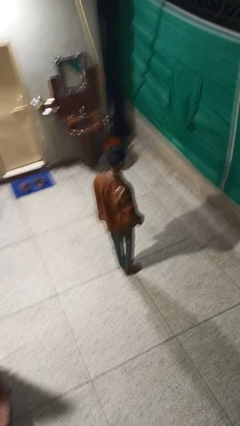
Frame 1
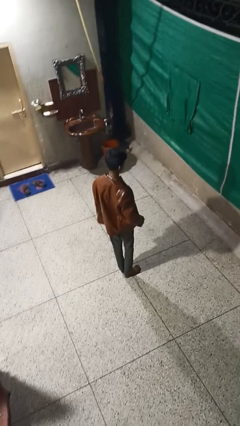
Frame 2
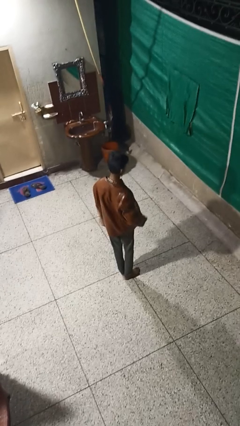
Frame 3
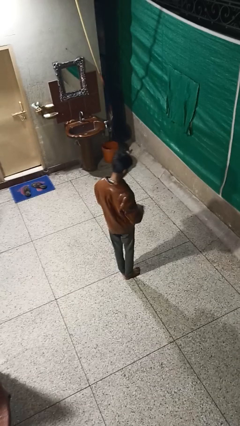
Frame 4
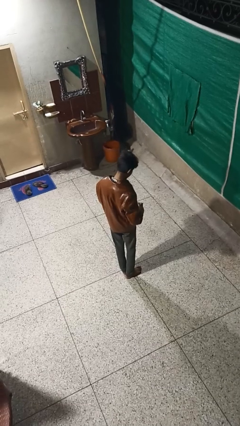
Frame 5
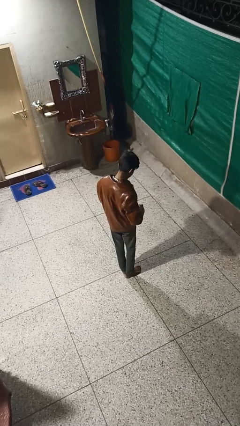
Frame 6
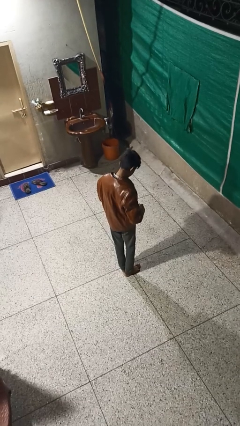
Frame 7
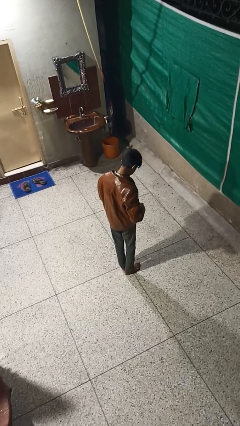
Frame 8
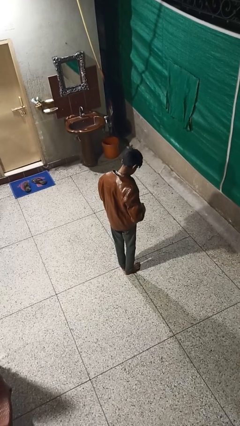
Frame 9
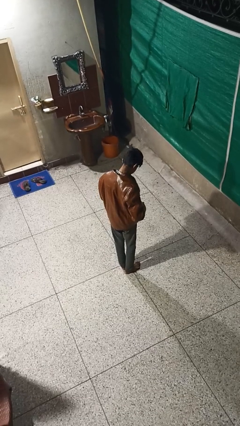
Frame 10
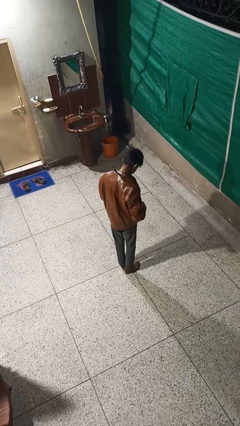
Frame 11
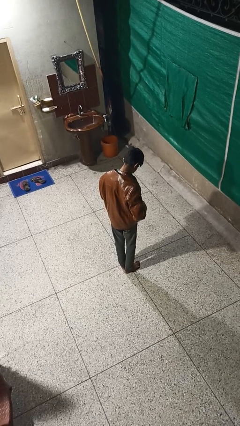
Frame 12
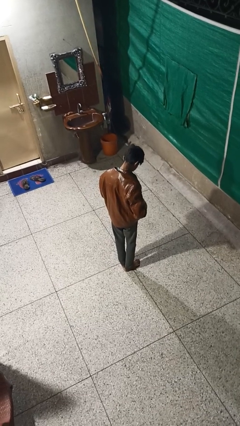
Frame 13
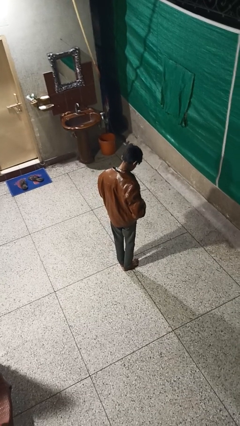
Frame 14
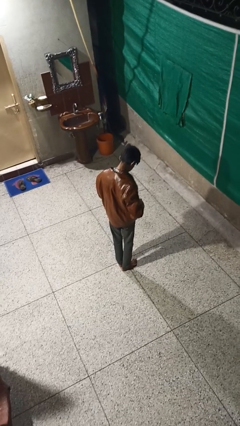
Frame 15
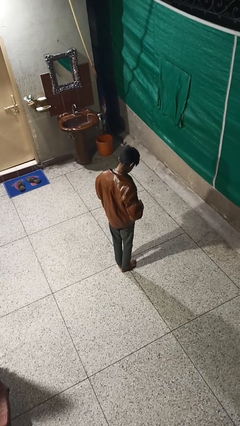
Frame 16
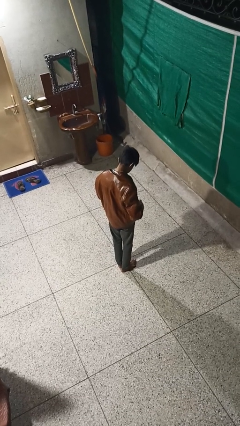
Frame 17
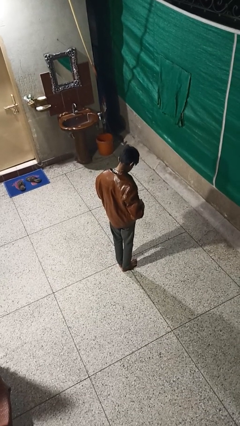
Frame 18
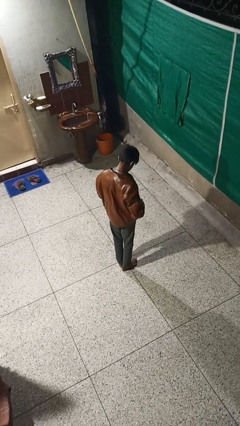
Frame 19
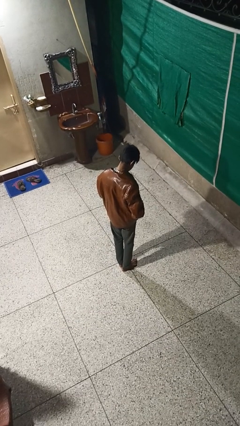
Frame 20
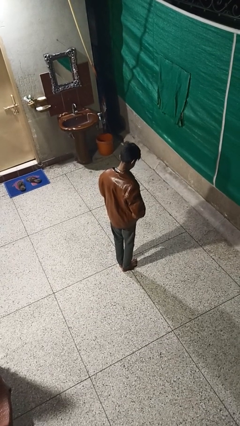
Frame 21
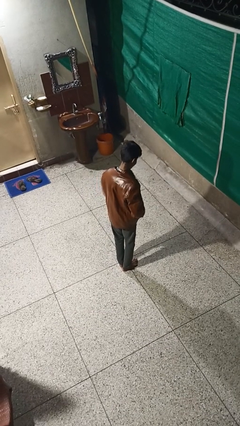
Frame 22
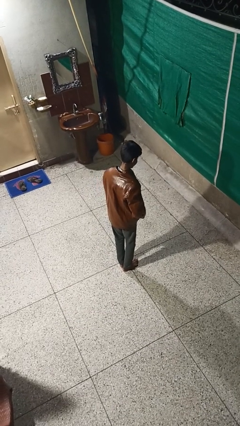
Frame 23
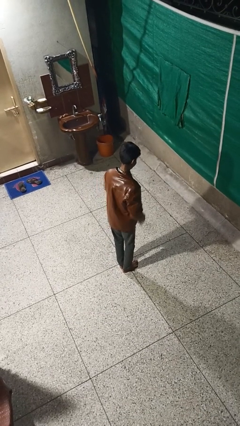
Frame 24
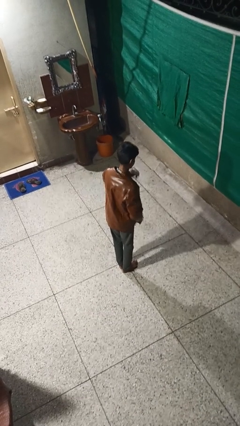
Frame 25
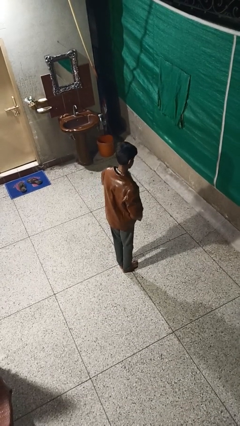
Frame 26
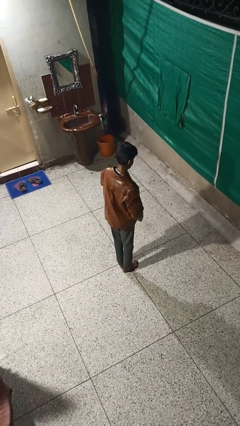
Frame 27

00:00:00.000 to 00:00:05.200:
person zips up jacket

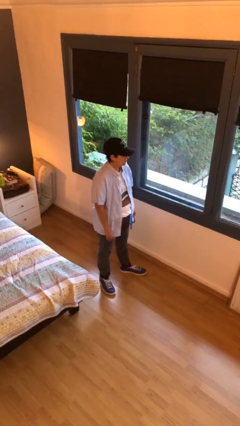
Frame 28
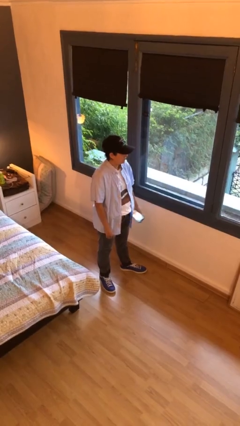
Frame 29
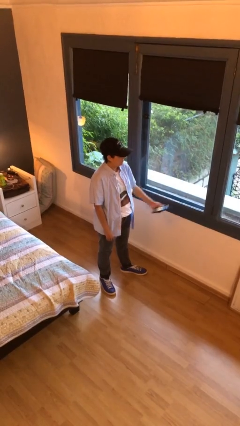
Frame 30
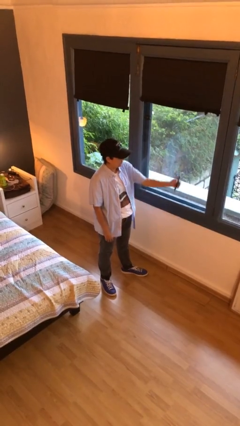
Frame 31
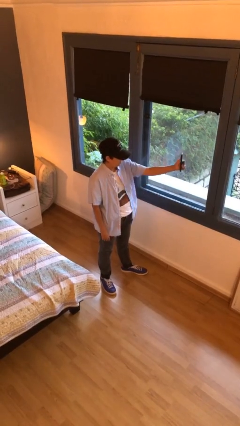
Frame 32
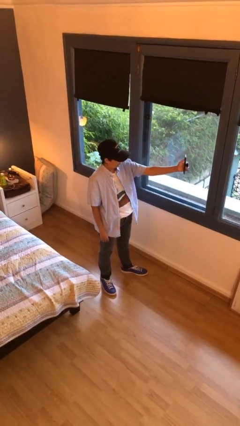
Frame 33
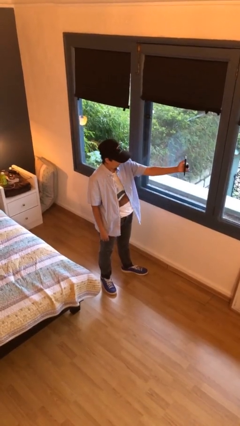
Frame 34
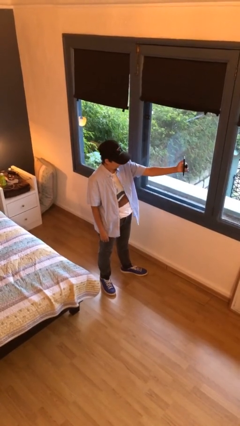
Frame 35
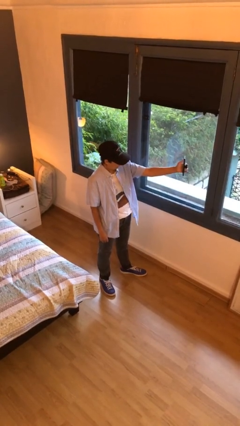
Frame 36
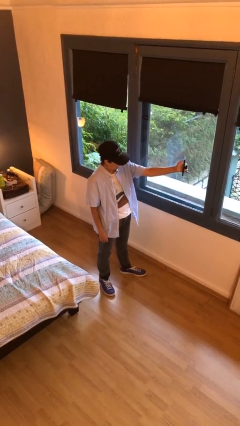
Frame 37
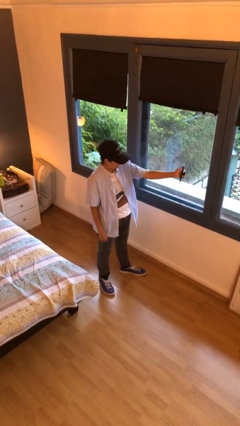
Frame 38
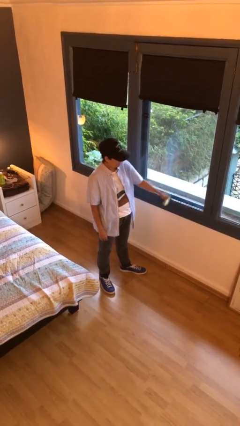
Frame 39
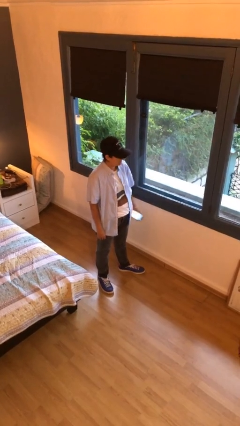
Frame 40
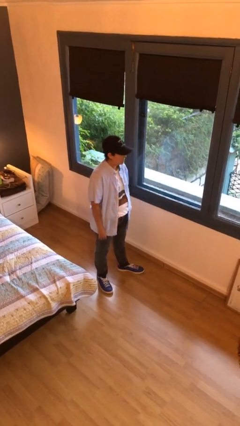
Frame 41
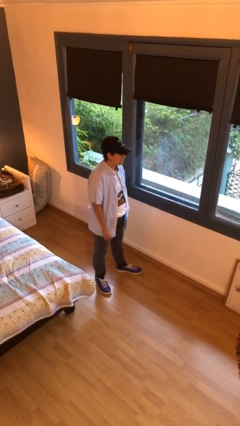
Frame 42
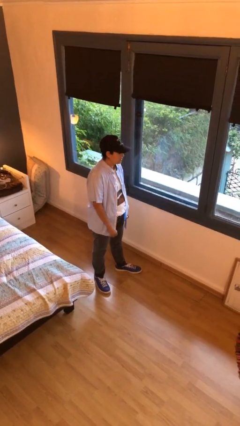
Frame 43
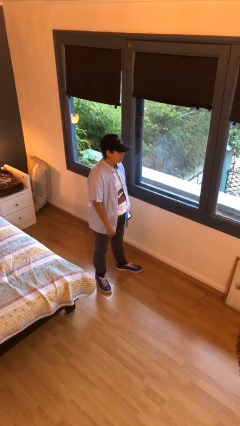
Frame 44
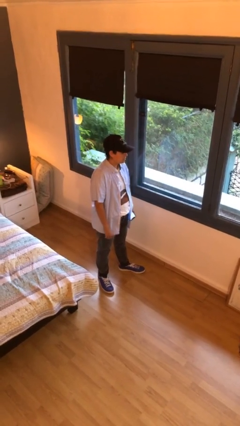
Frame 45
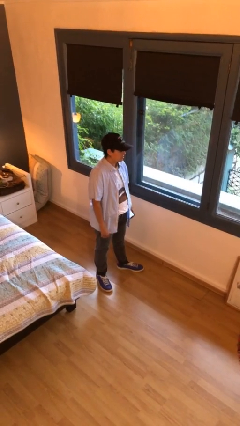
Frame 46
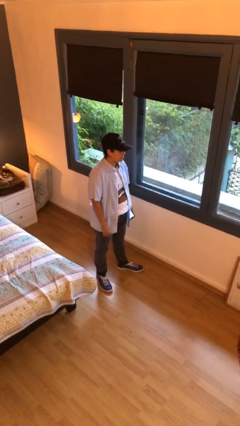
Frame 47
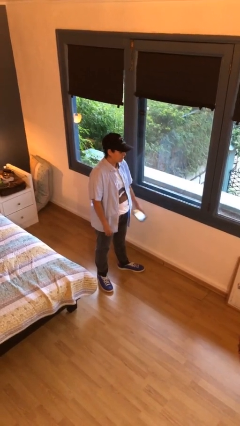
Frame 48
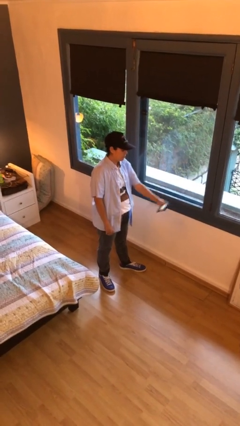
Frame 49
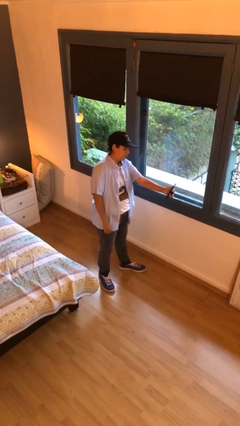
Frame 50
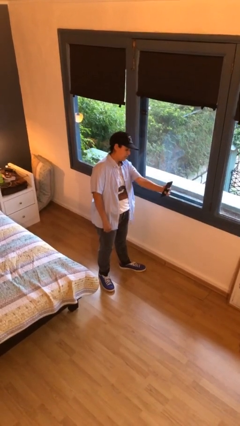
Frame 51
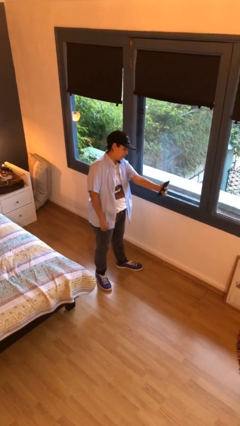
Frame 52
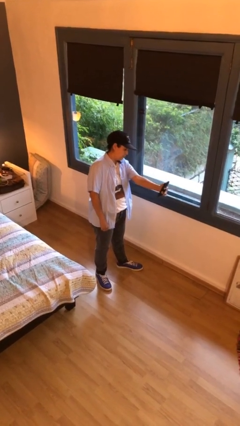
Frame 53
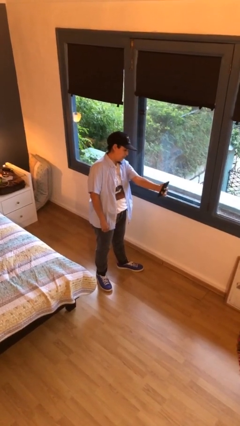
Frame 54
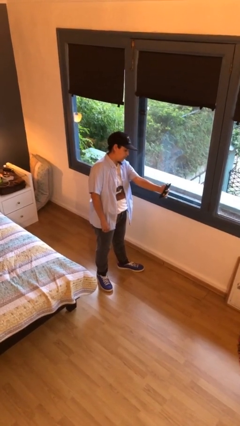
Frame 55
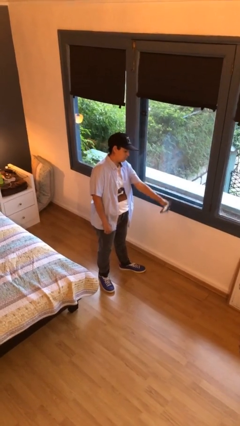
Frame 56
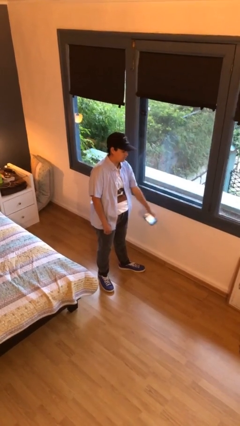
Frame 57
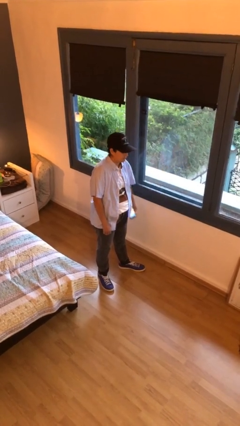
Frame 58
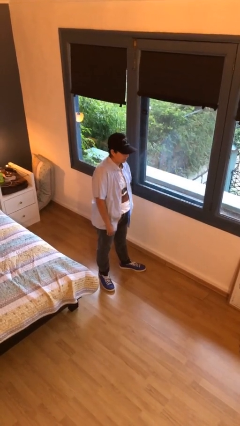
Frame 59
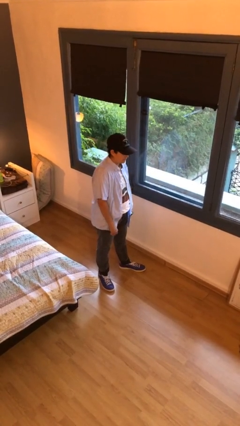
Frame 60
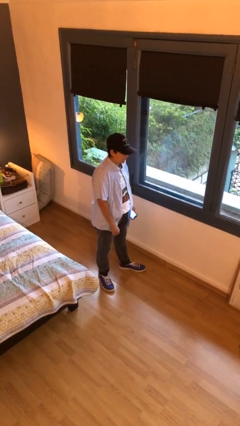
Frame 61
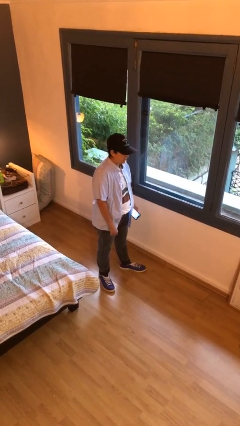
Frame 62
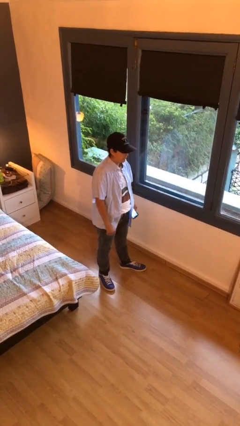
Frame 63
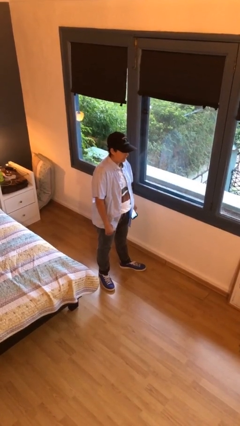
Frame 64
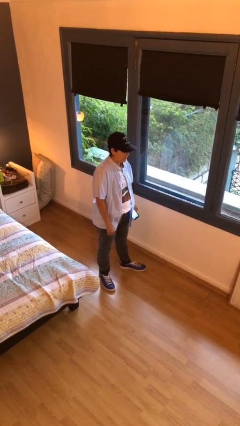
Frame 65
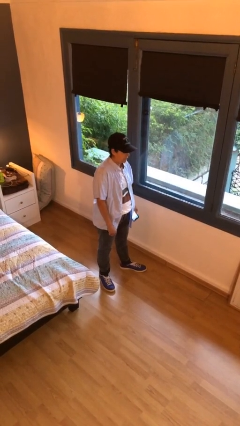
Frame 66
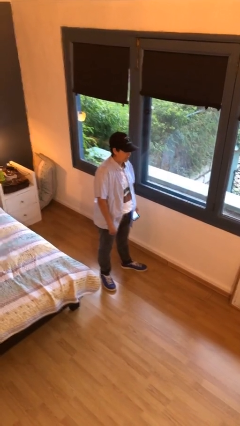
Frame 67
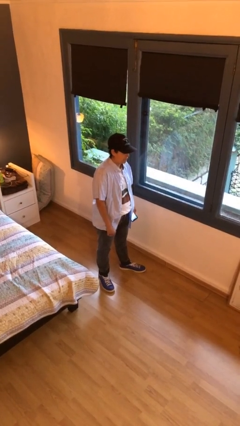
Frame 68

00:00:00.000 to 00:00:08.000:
person takes selfie

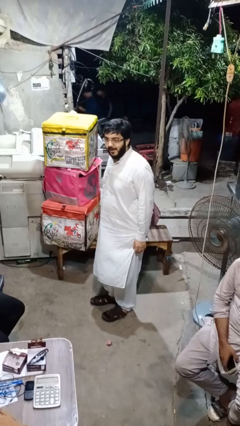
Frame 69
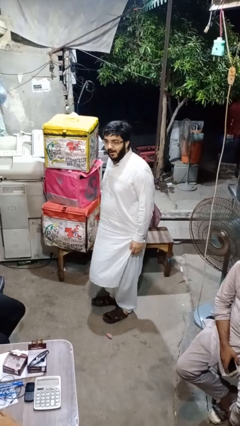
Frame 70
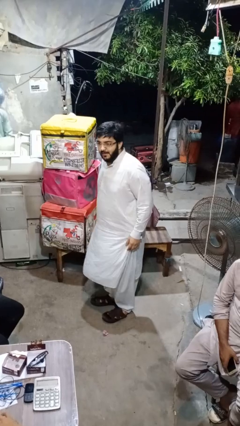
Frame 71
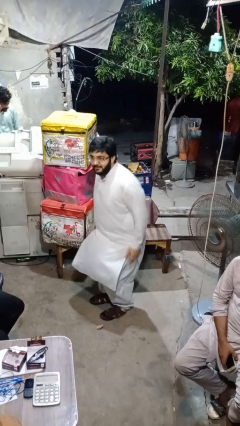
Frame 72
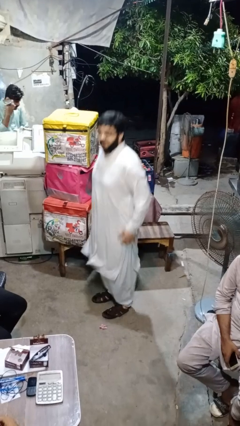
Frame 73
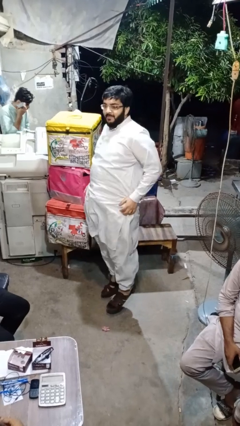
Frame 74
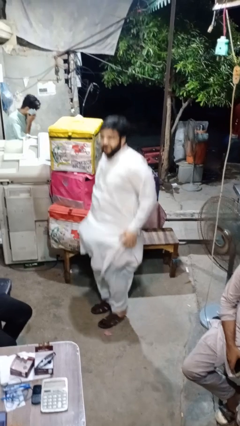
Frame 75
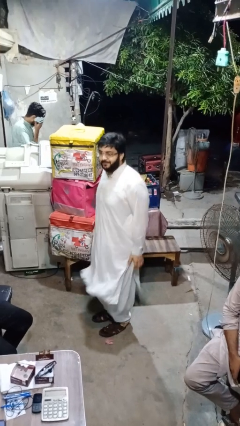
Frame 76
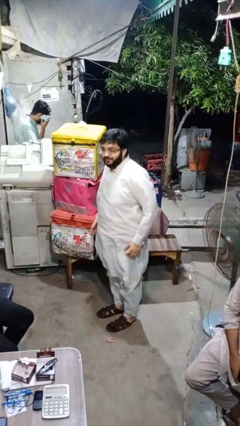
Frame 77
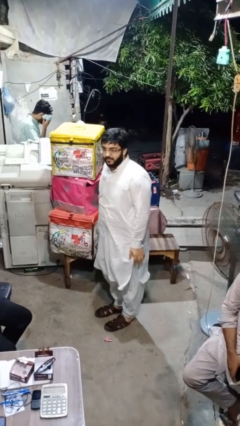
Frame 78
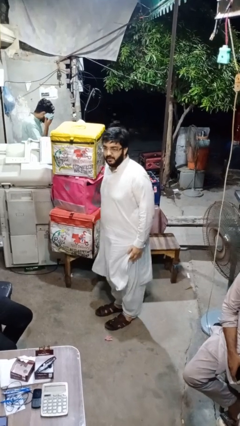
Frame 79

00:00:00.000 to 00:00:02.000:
person jumps

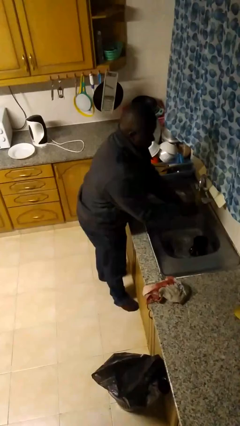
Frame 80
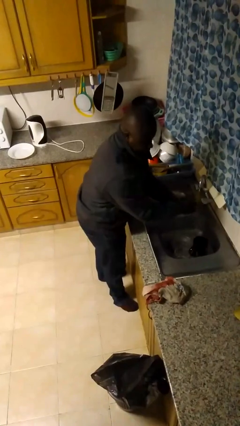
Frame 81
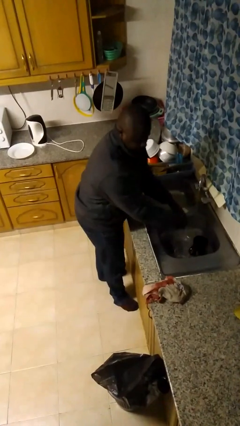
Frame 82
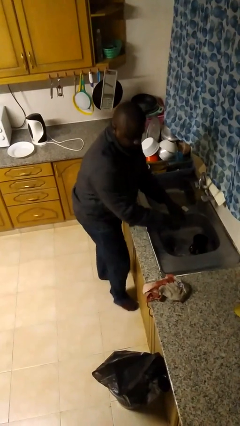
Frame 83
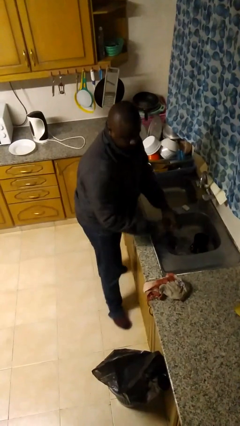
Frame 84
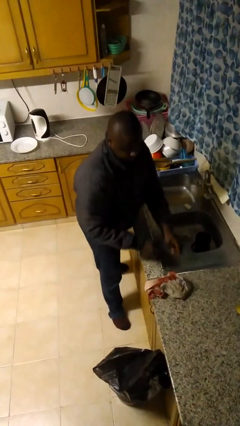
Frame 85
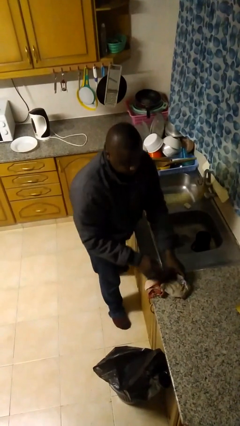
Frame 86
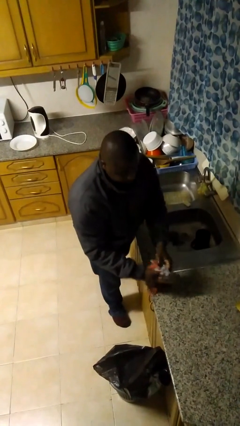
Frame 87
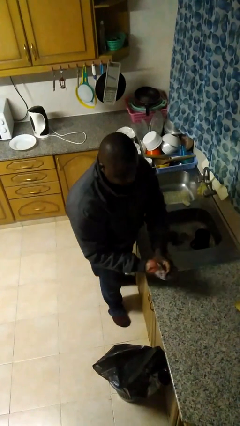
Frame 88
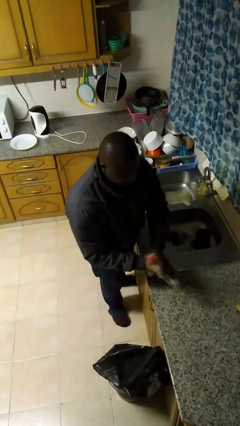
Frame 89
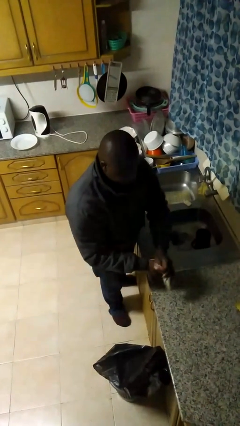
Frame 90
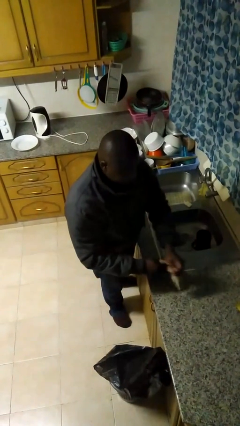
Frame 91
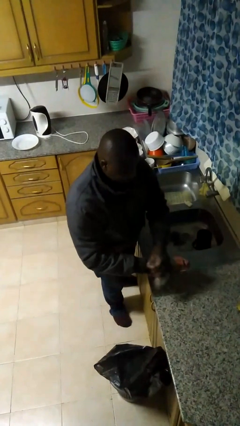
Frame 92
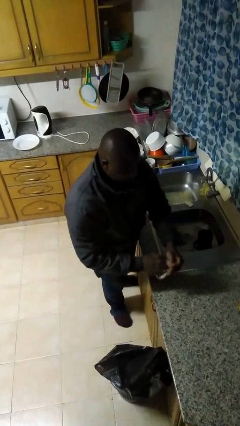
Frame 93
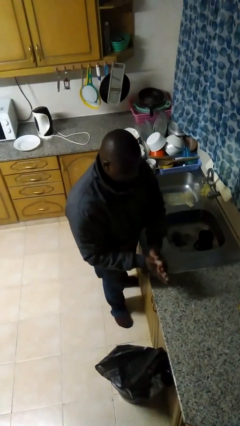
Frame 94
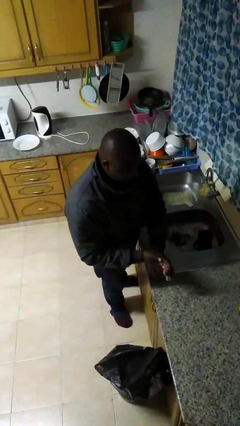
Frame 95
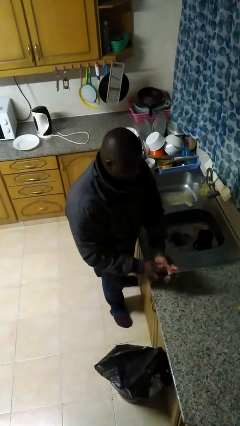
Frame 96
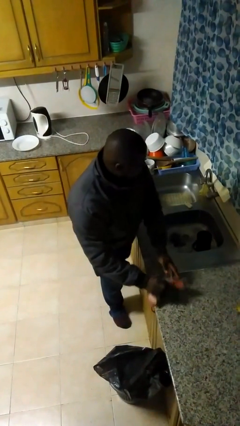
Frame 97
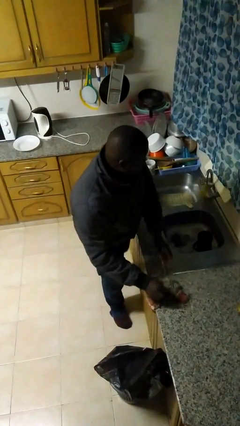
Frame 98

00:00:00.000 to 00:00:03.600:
person dries hands with towel
